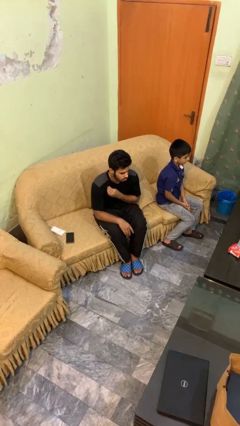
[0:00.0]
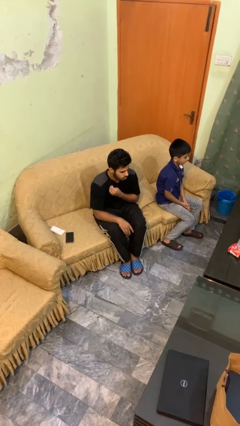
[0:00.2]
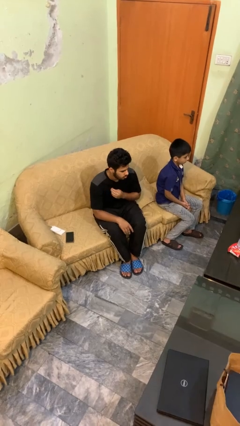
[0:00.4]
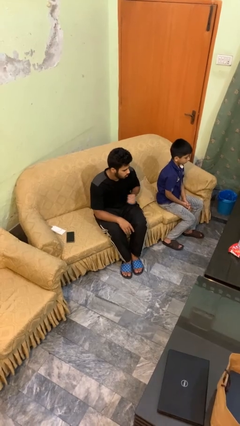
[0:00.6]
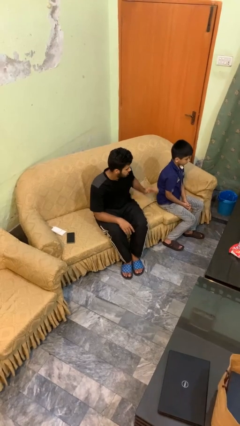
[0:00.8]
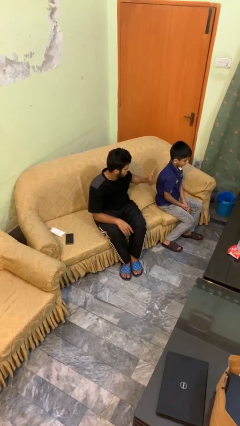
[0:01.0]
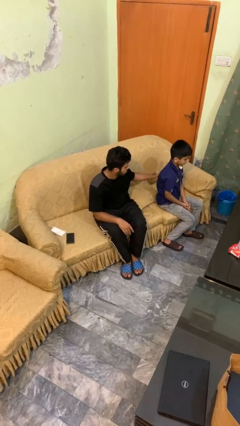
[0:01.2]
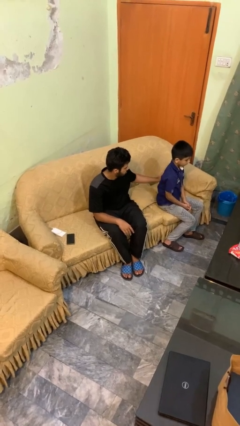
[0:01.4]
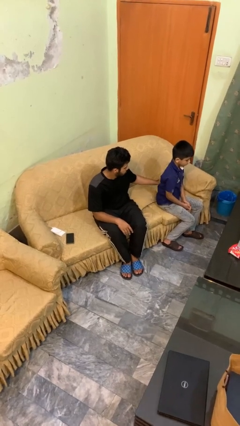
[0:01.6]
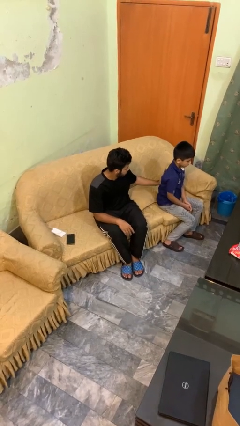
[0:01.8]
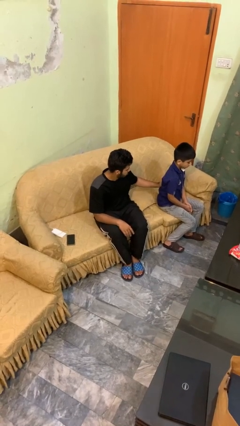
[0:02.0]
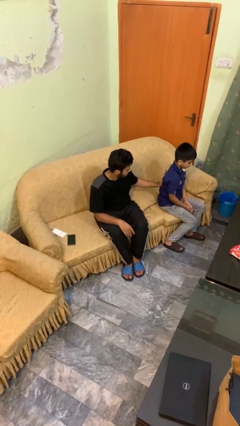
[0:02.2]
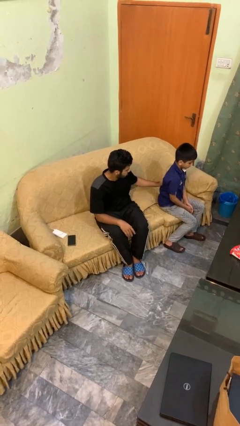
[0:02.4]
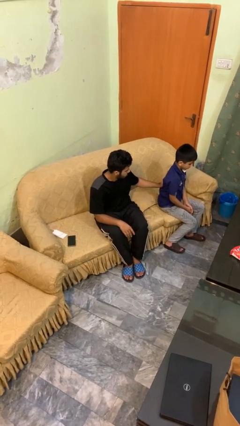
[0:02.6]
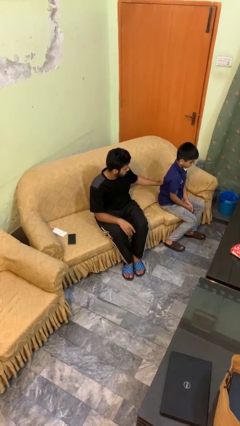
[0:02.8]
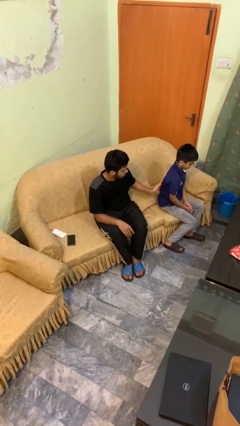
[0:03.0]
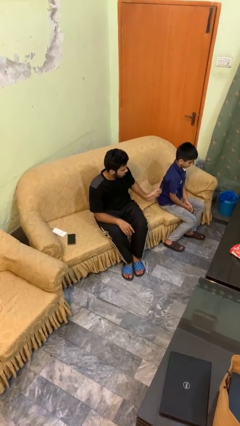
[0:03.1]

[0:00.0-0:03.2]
person touches back of person

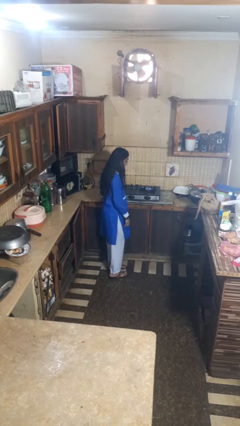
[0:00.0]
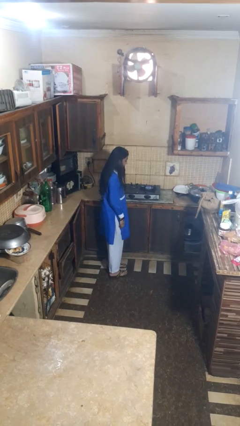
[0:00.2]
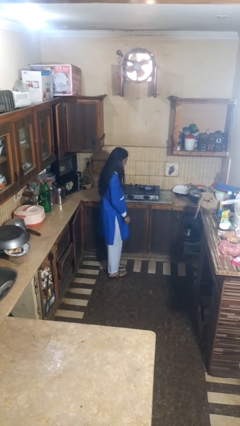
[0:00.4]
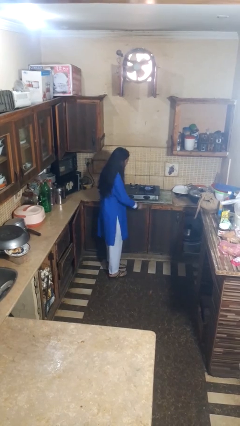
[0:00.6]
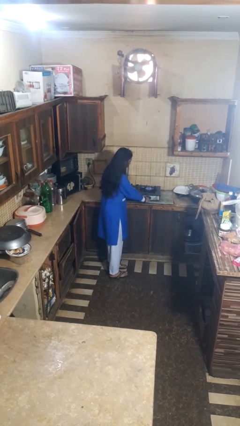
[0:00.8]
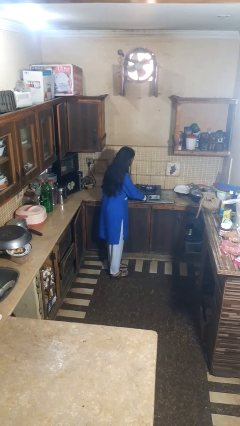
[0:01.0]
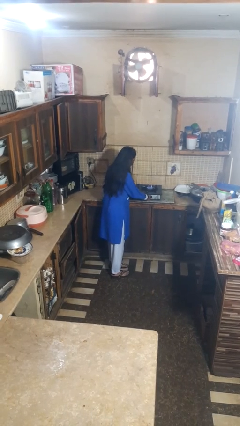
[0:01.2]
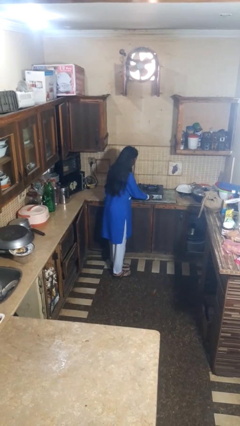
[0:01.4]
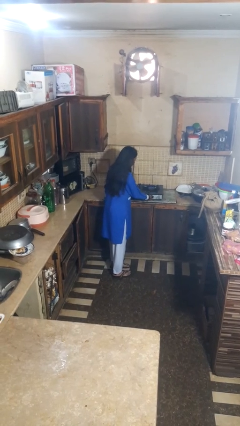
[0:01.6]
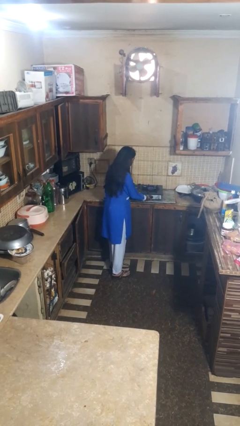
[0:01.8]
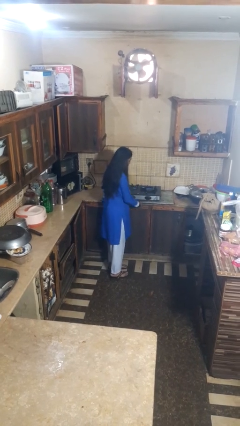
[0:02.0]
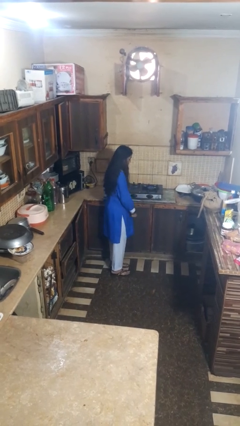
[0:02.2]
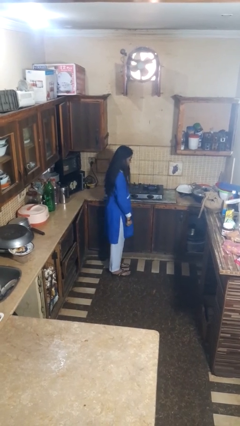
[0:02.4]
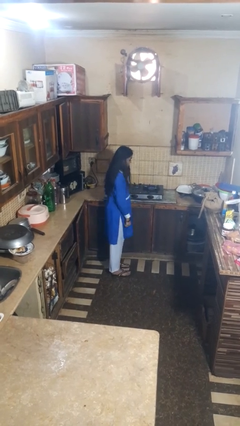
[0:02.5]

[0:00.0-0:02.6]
person turns off stovetop

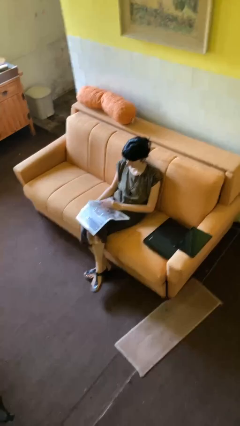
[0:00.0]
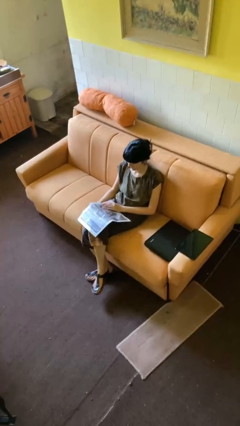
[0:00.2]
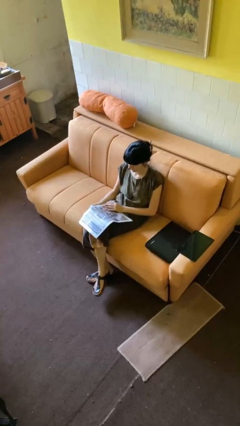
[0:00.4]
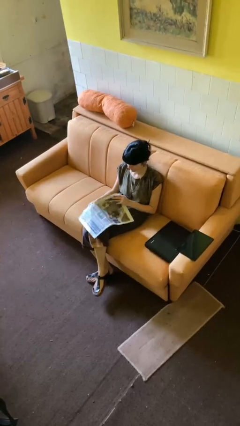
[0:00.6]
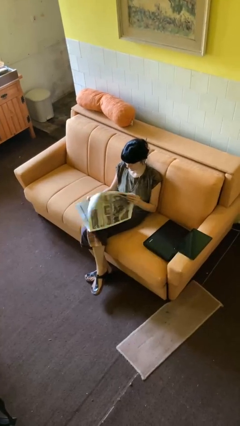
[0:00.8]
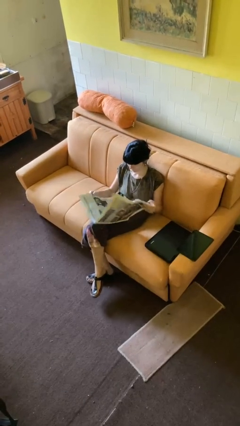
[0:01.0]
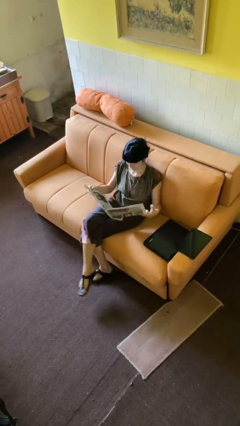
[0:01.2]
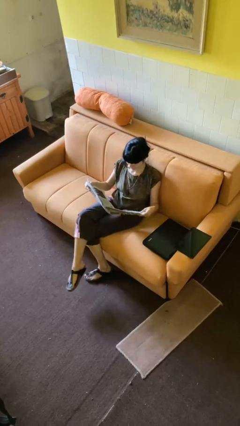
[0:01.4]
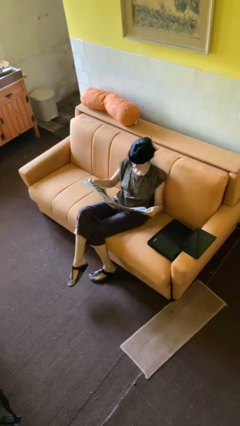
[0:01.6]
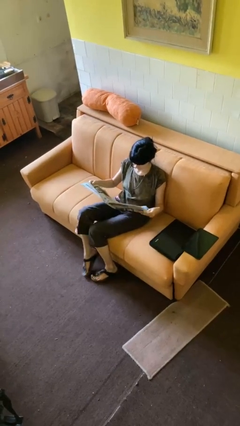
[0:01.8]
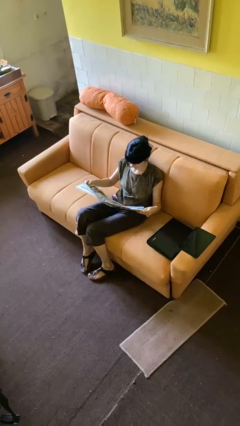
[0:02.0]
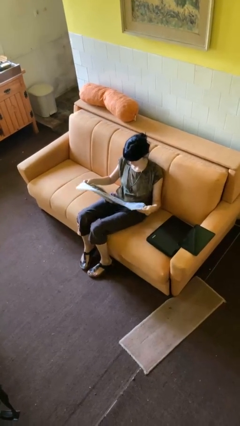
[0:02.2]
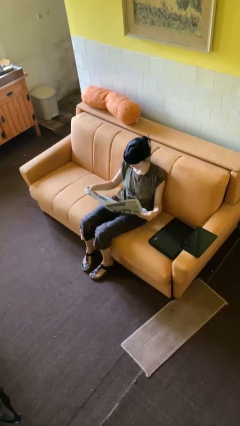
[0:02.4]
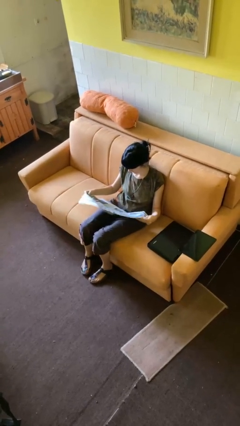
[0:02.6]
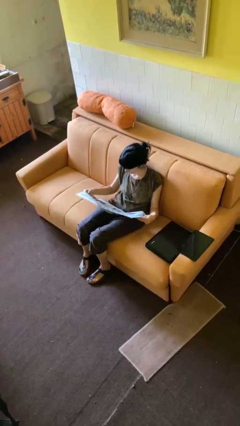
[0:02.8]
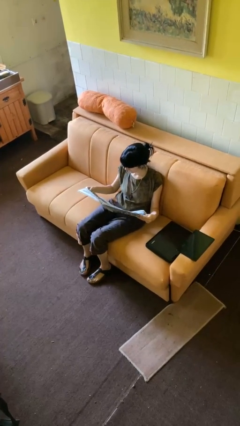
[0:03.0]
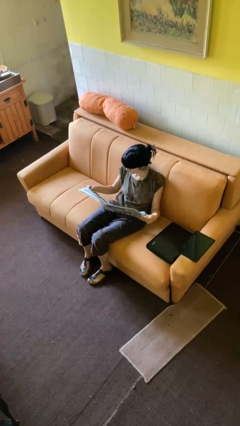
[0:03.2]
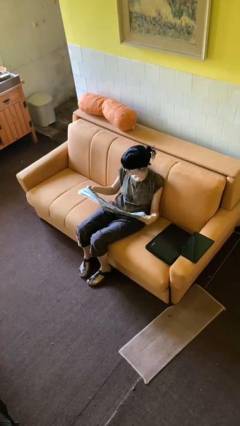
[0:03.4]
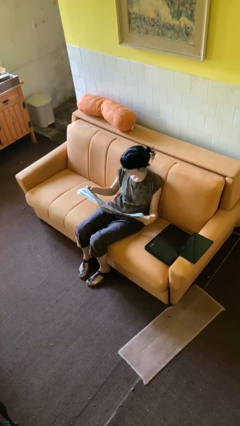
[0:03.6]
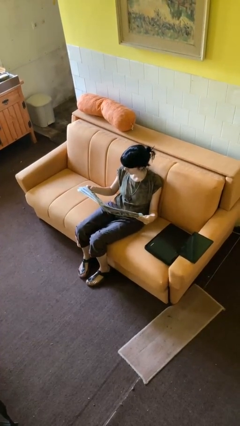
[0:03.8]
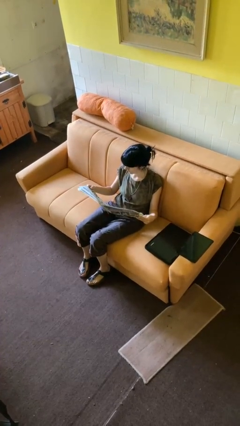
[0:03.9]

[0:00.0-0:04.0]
person reads newspaper

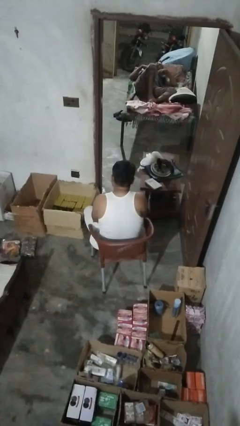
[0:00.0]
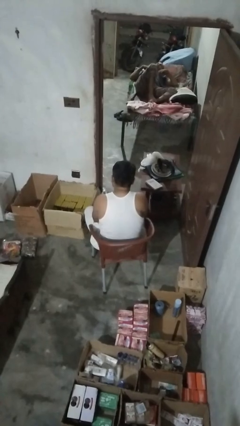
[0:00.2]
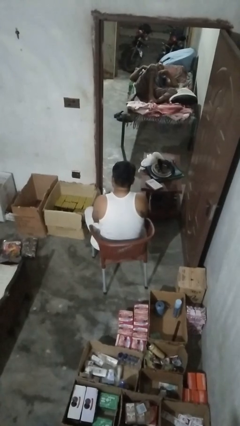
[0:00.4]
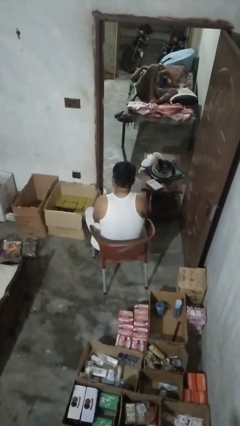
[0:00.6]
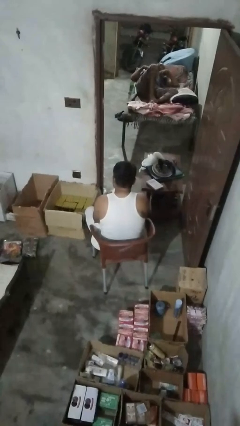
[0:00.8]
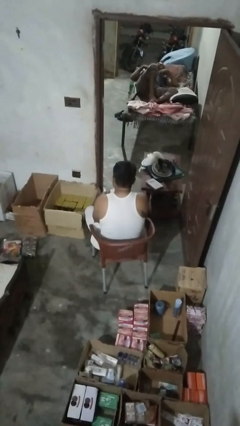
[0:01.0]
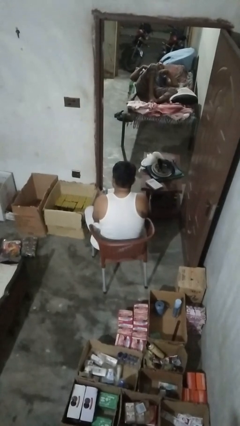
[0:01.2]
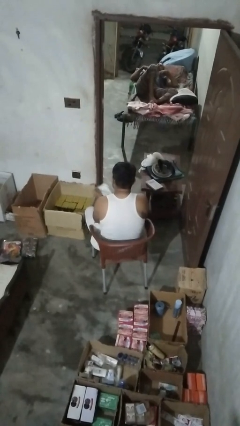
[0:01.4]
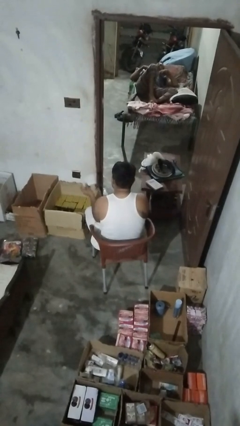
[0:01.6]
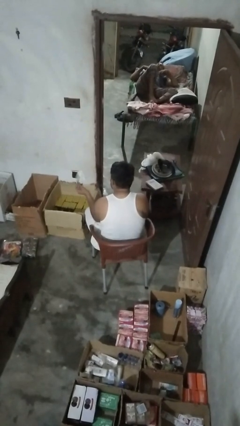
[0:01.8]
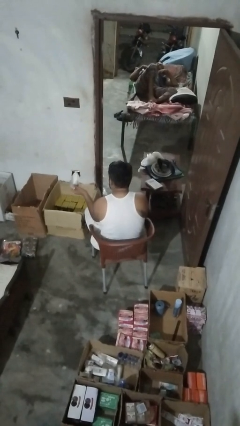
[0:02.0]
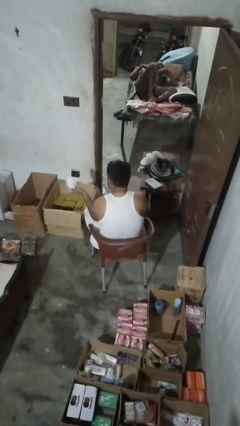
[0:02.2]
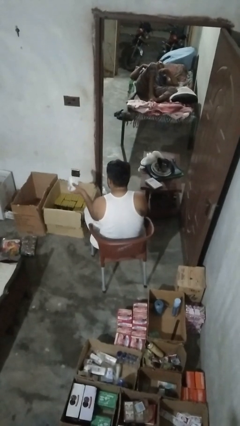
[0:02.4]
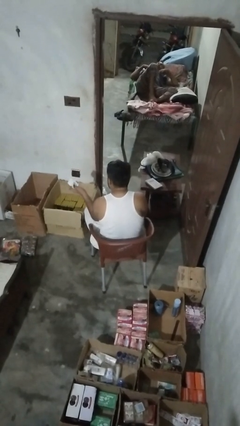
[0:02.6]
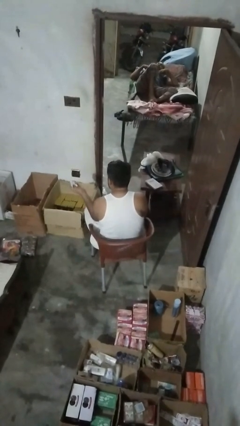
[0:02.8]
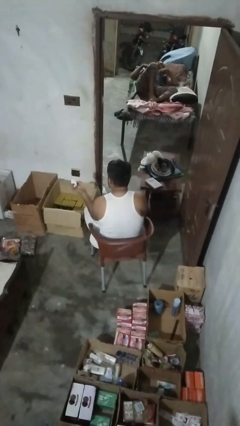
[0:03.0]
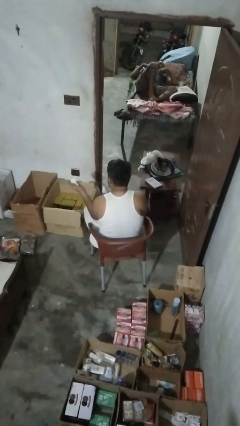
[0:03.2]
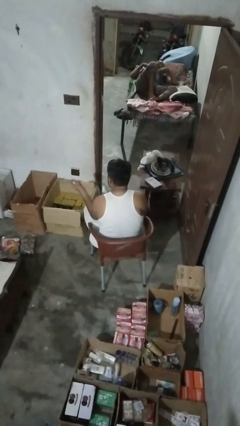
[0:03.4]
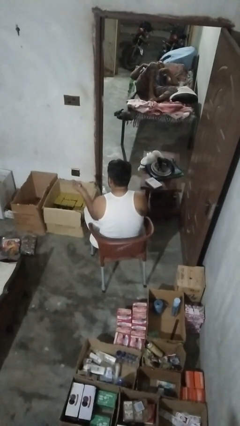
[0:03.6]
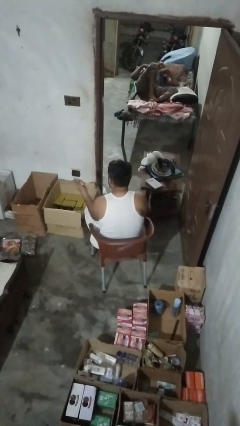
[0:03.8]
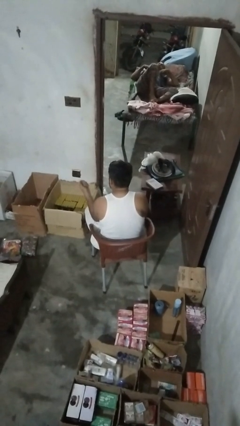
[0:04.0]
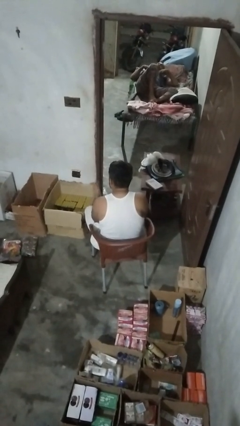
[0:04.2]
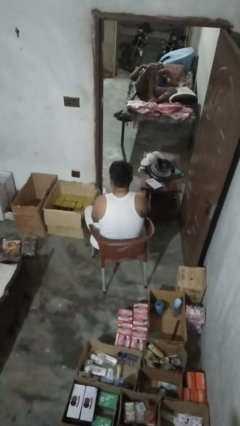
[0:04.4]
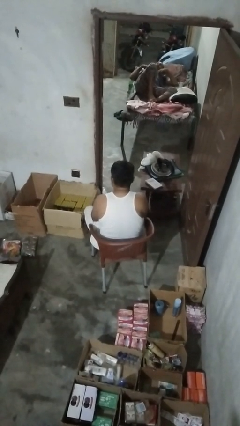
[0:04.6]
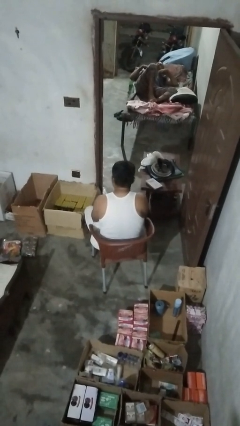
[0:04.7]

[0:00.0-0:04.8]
person crumples paper

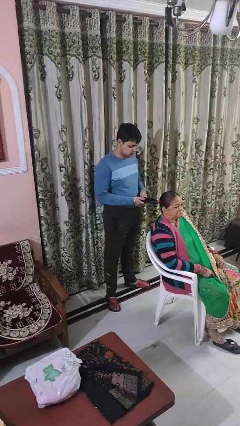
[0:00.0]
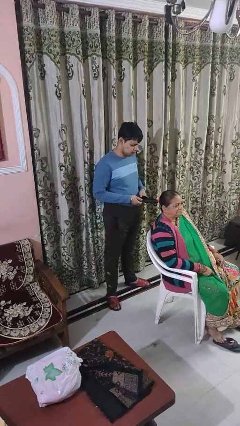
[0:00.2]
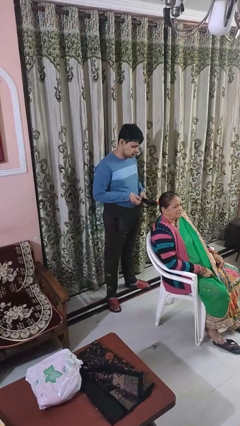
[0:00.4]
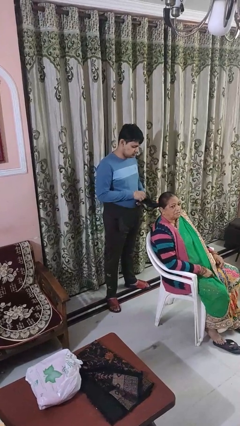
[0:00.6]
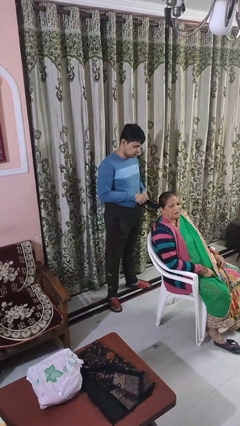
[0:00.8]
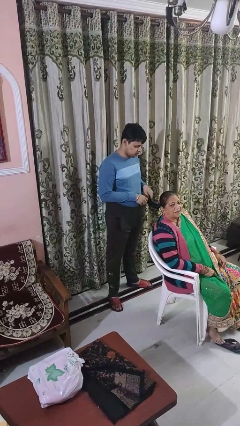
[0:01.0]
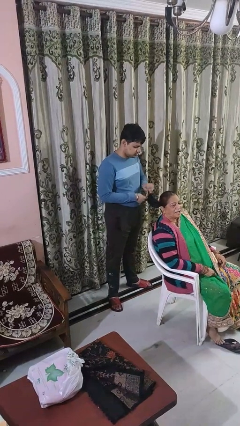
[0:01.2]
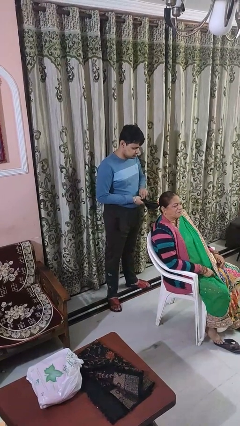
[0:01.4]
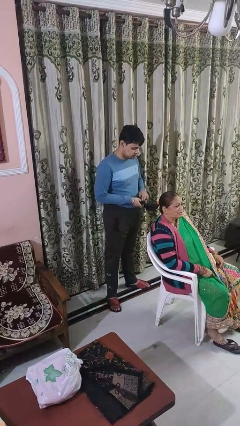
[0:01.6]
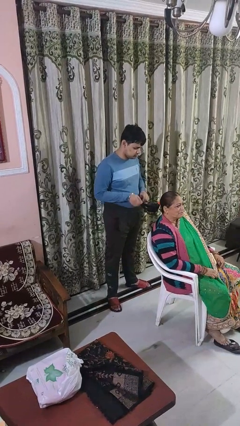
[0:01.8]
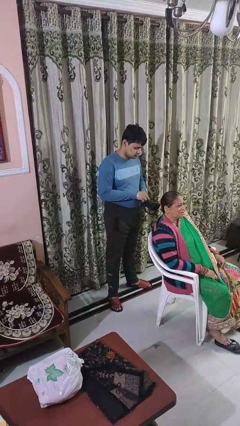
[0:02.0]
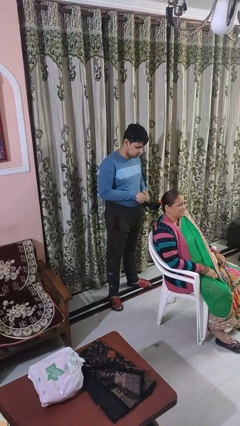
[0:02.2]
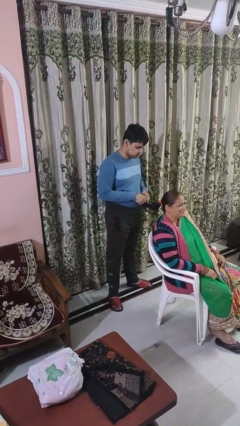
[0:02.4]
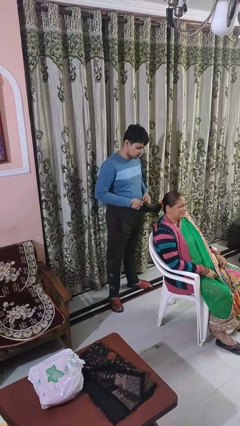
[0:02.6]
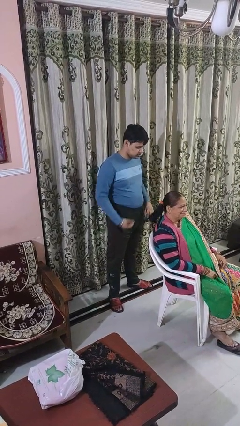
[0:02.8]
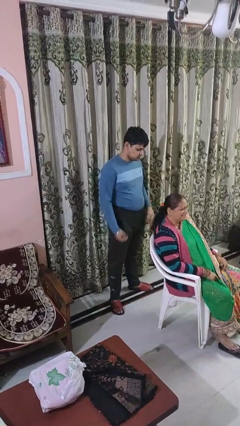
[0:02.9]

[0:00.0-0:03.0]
person braids hair of person
